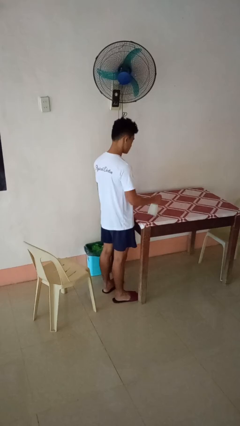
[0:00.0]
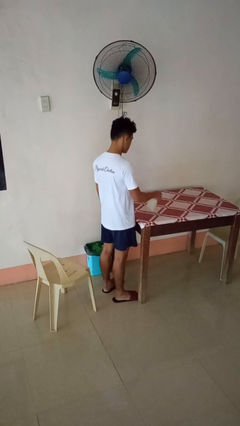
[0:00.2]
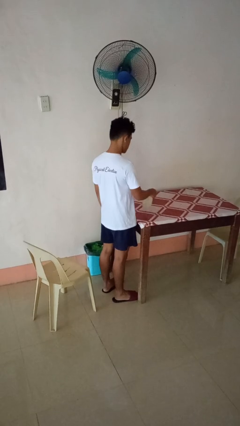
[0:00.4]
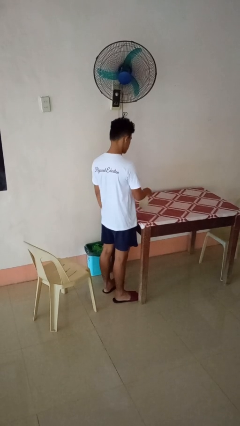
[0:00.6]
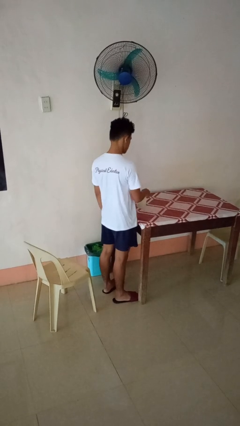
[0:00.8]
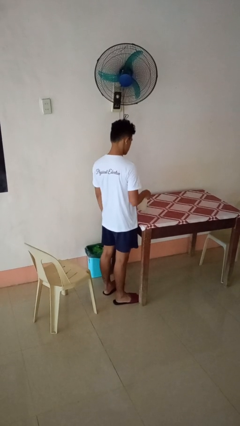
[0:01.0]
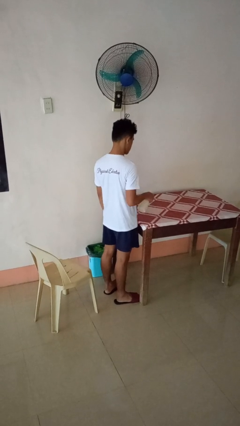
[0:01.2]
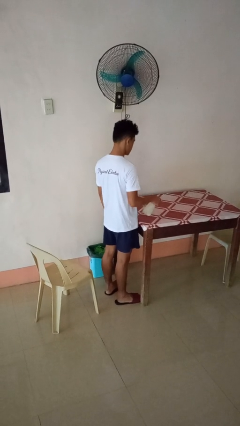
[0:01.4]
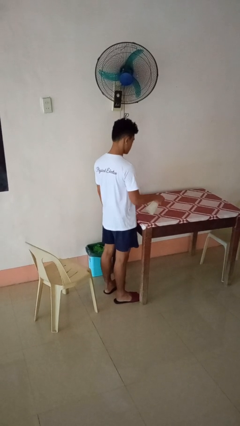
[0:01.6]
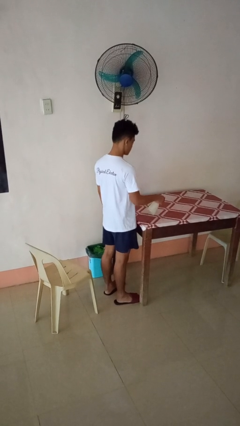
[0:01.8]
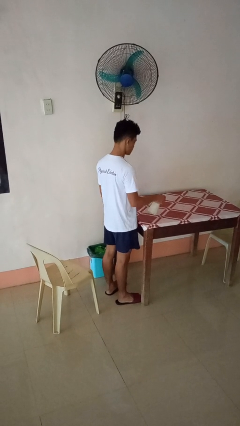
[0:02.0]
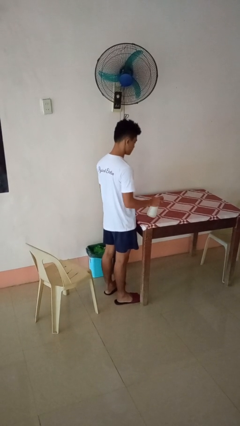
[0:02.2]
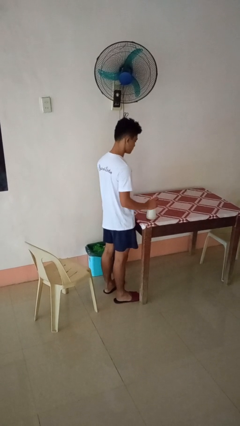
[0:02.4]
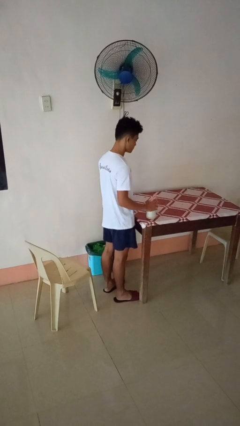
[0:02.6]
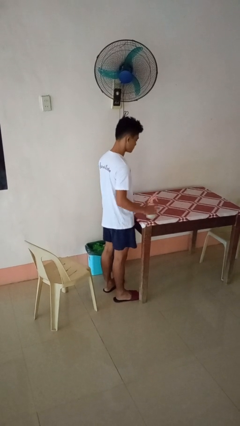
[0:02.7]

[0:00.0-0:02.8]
person sprays from bottle

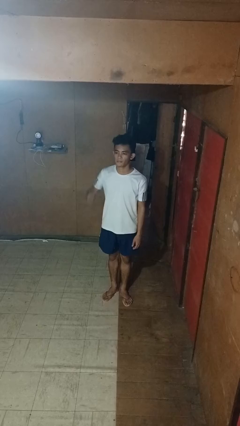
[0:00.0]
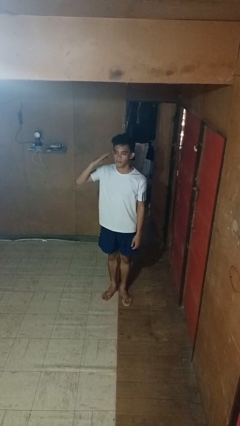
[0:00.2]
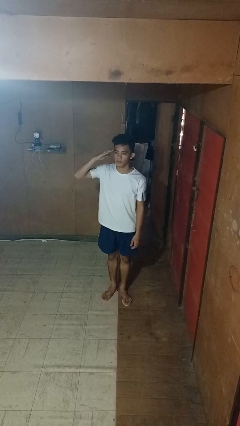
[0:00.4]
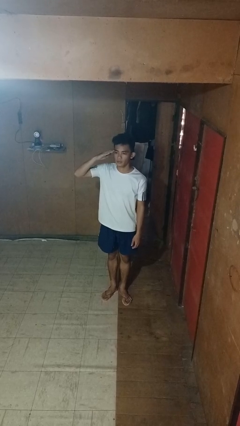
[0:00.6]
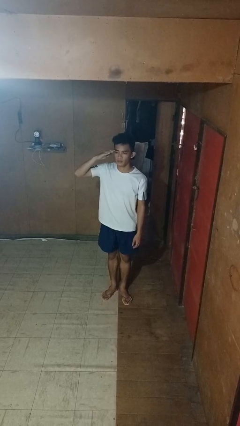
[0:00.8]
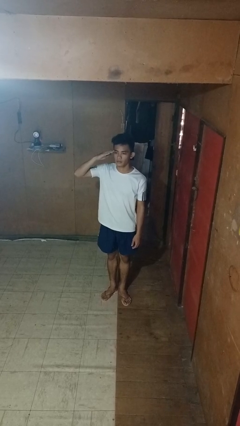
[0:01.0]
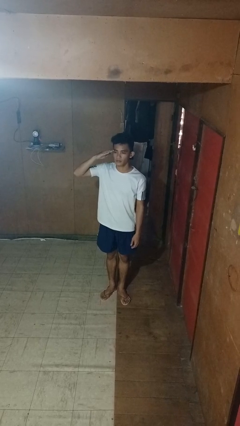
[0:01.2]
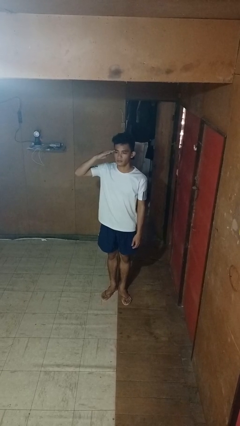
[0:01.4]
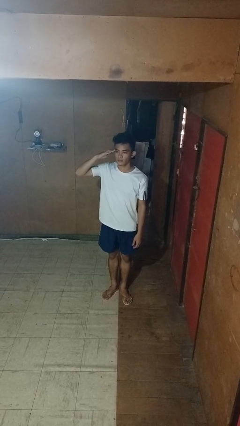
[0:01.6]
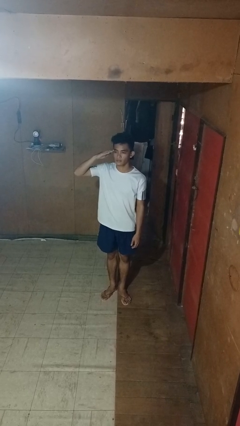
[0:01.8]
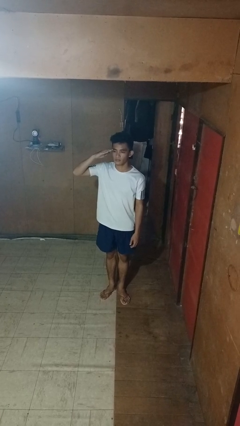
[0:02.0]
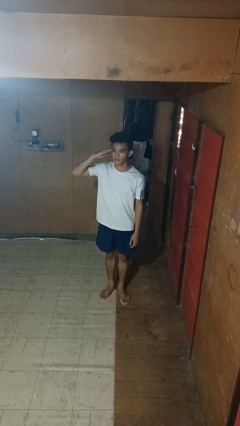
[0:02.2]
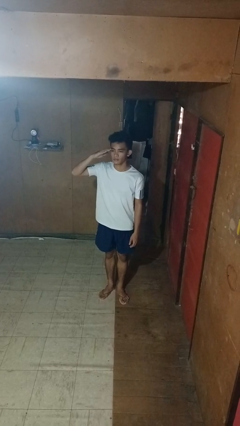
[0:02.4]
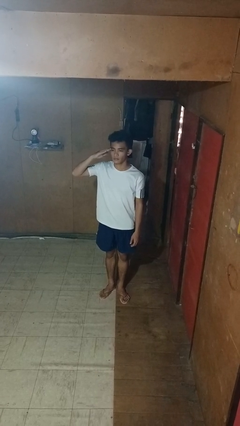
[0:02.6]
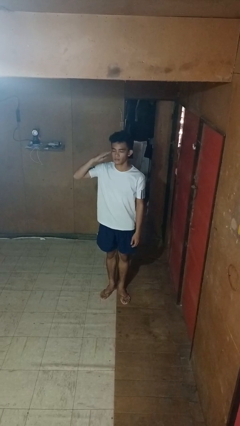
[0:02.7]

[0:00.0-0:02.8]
person salutes

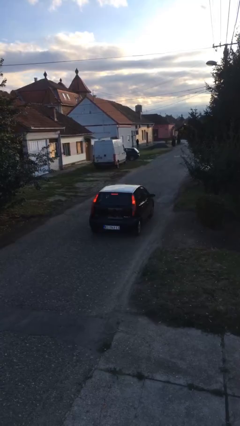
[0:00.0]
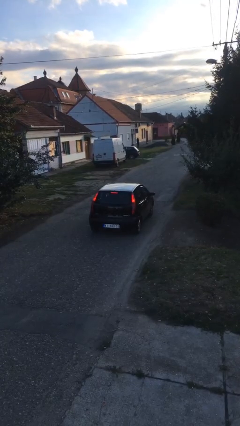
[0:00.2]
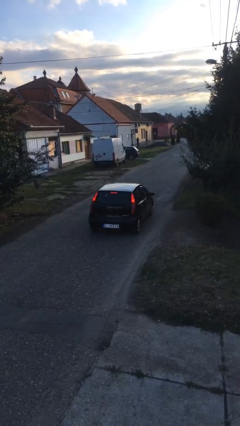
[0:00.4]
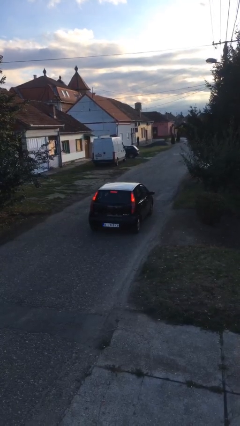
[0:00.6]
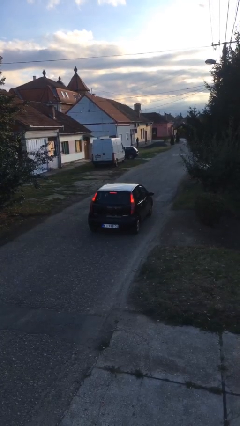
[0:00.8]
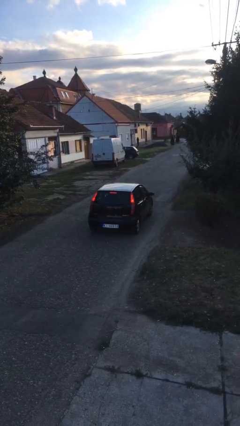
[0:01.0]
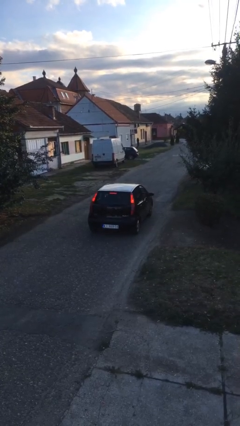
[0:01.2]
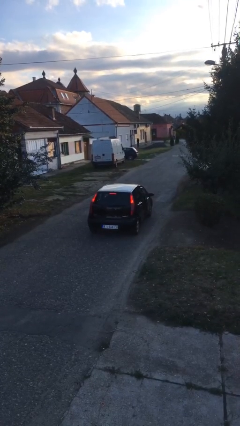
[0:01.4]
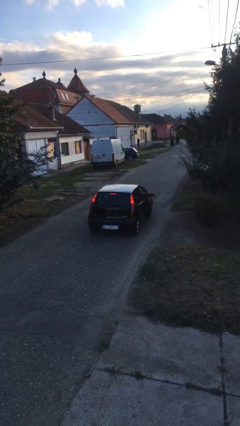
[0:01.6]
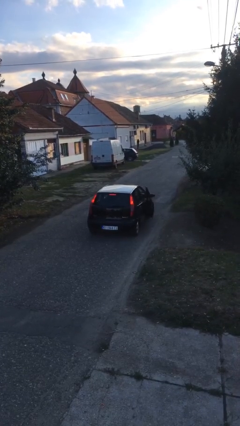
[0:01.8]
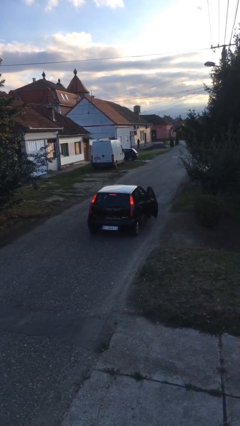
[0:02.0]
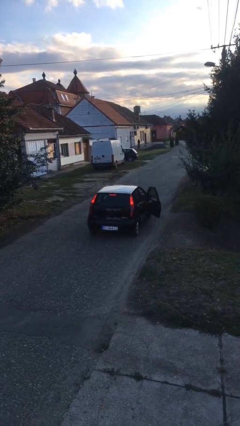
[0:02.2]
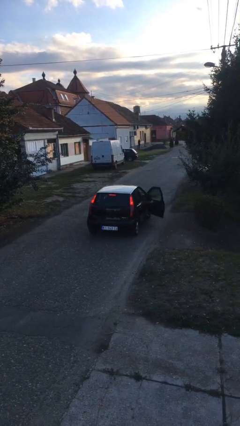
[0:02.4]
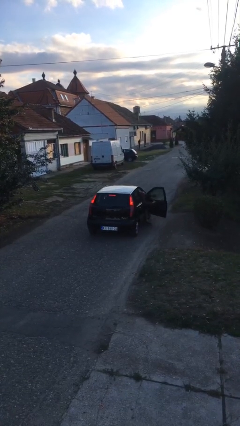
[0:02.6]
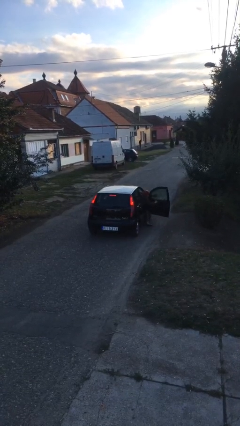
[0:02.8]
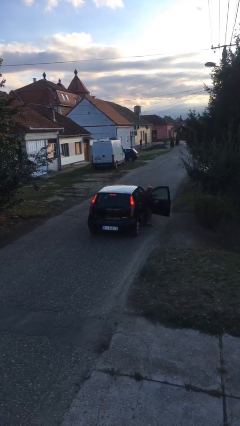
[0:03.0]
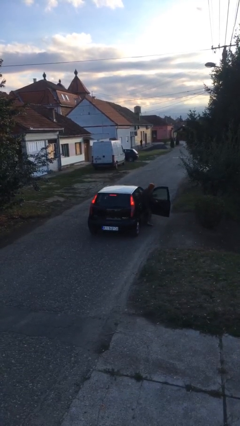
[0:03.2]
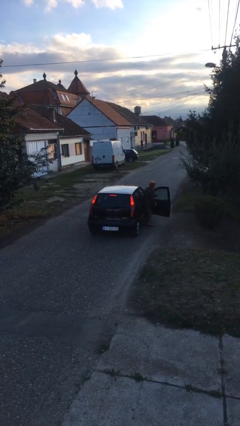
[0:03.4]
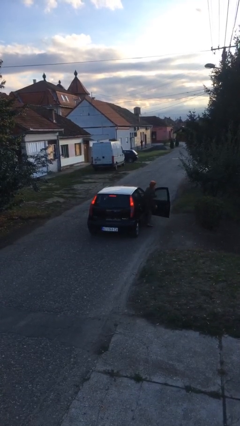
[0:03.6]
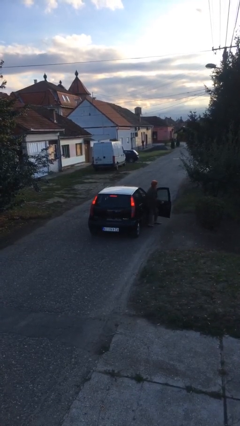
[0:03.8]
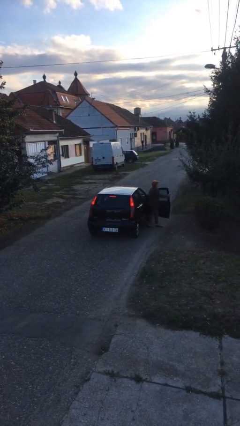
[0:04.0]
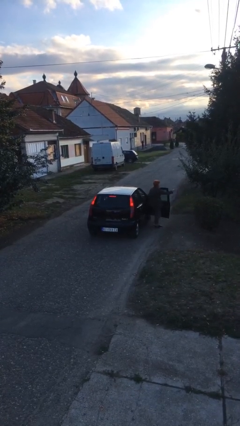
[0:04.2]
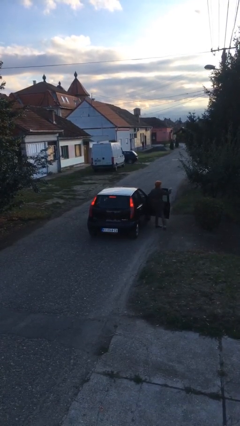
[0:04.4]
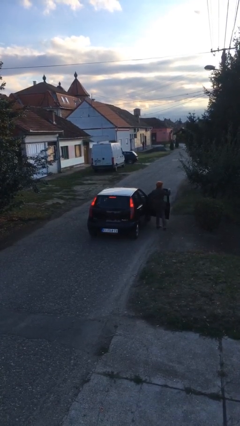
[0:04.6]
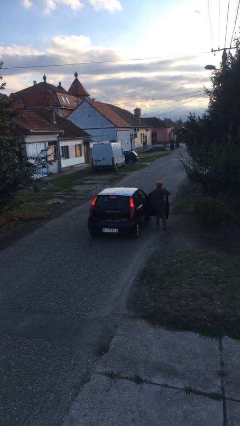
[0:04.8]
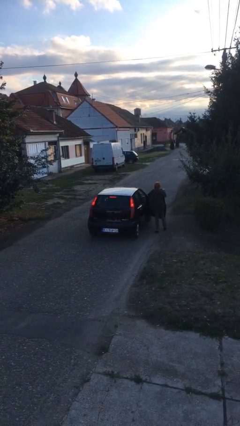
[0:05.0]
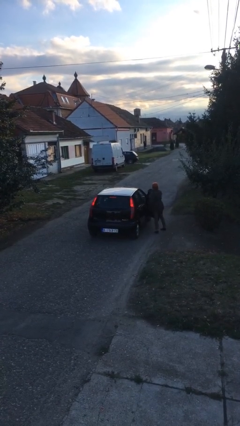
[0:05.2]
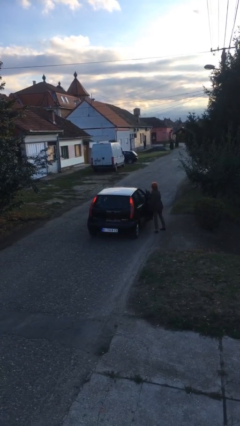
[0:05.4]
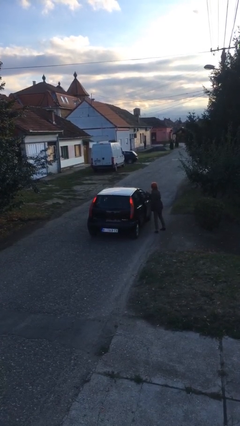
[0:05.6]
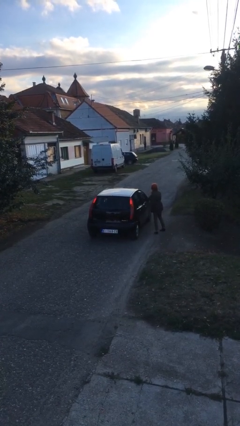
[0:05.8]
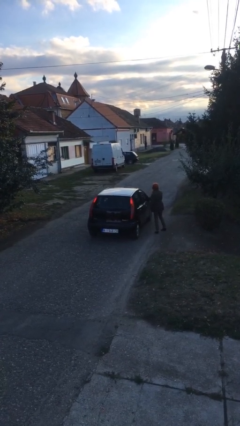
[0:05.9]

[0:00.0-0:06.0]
car drops off person

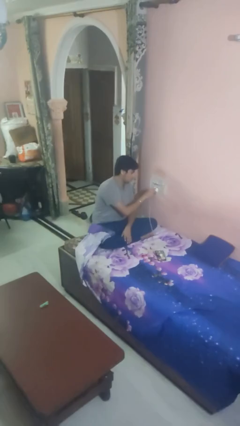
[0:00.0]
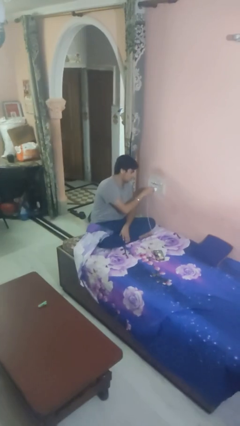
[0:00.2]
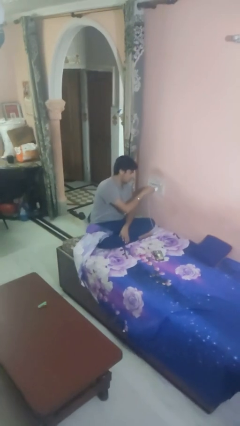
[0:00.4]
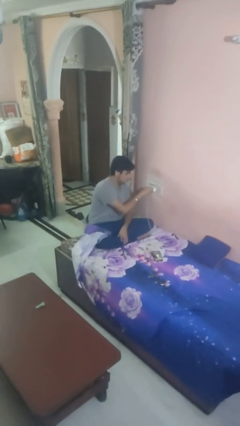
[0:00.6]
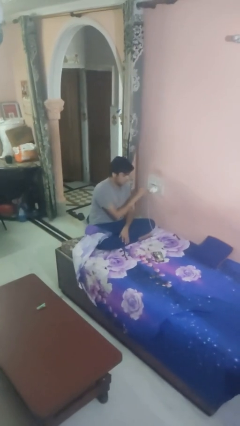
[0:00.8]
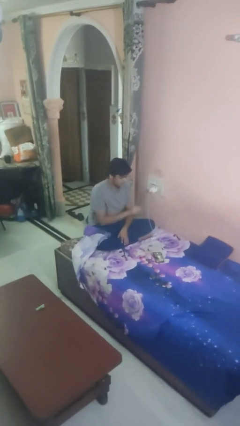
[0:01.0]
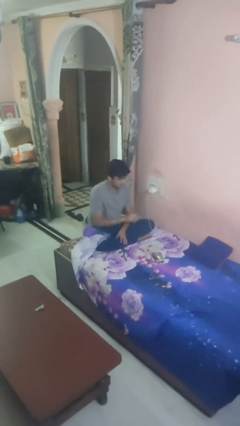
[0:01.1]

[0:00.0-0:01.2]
person plugs into electrical socket

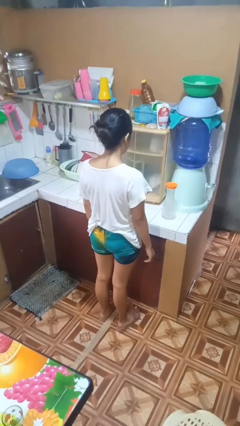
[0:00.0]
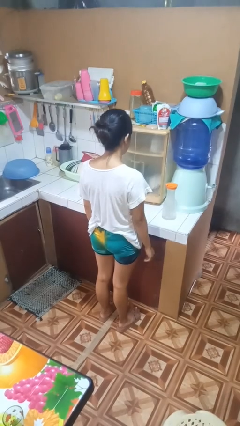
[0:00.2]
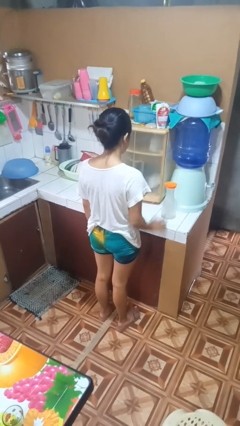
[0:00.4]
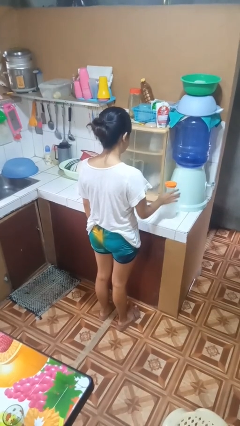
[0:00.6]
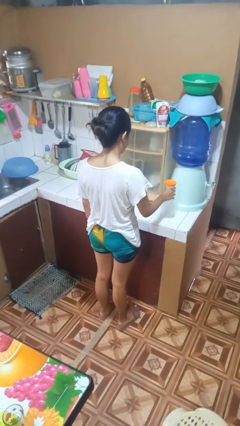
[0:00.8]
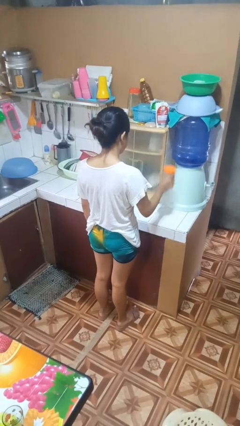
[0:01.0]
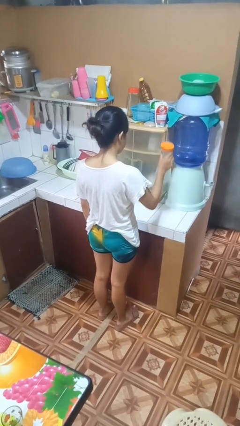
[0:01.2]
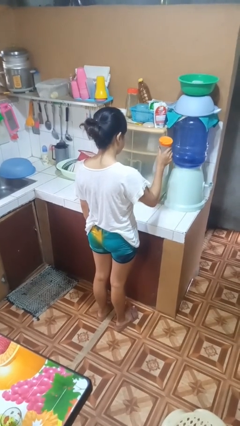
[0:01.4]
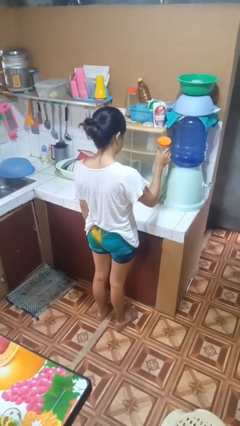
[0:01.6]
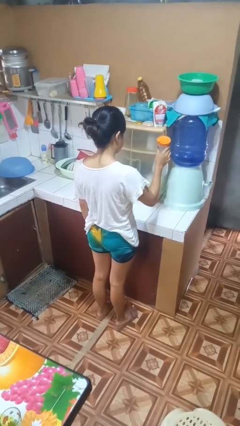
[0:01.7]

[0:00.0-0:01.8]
person picks up object from countertop

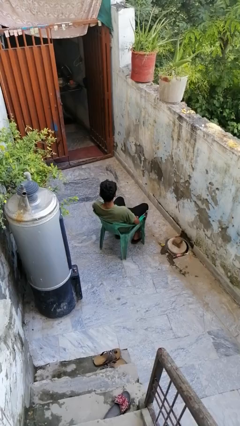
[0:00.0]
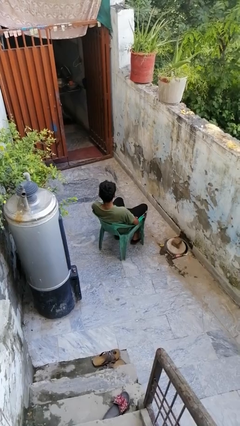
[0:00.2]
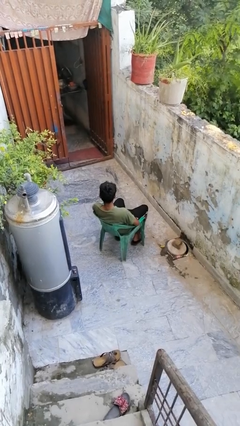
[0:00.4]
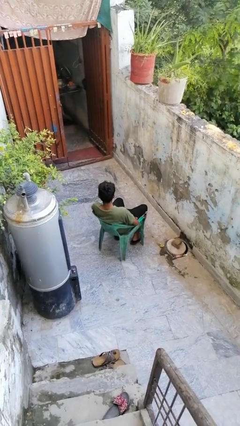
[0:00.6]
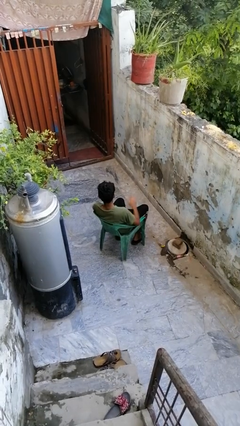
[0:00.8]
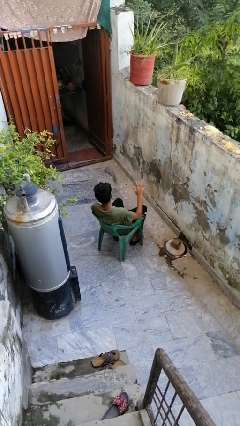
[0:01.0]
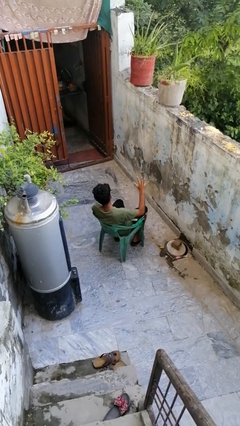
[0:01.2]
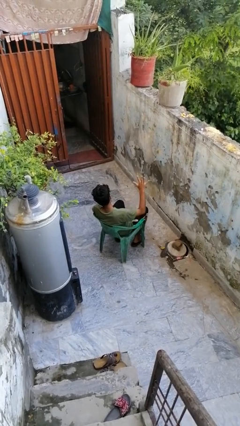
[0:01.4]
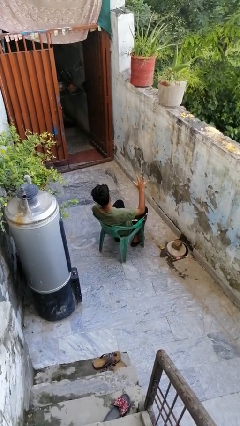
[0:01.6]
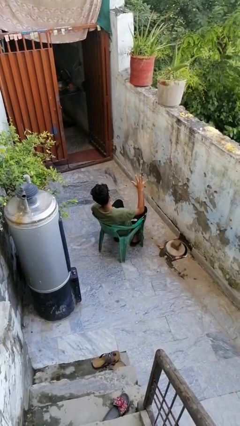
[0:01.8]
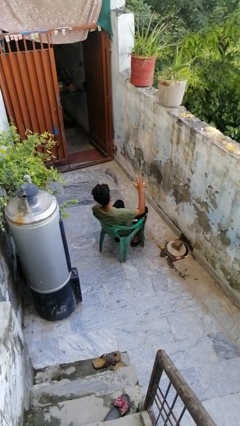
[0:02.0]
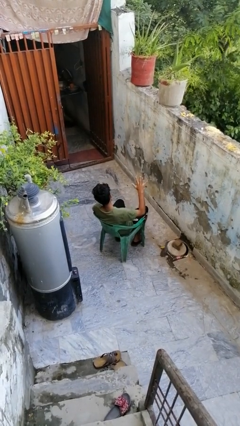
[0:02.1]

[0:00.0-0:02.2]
person gestures number five

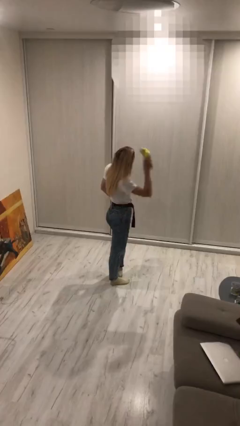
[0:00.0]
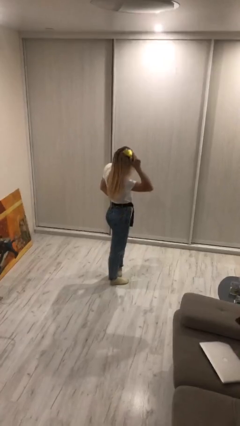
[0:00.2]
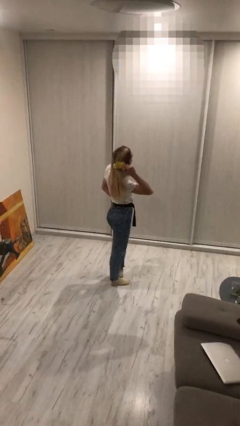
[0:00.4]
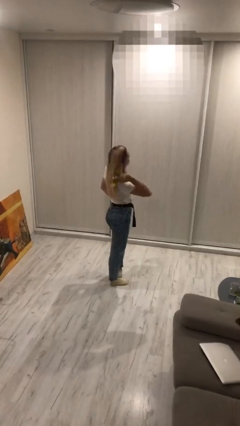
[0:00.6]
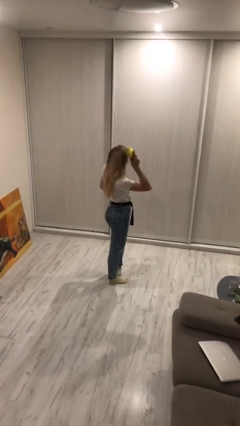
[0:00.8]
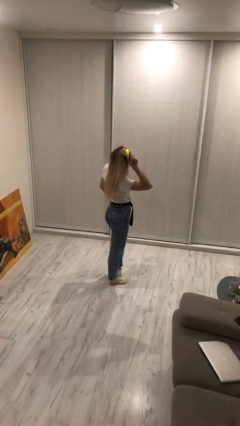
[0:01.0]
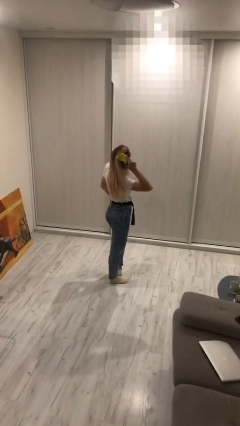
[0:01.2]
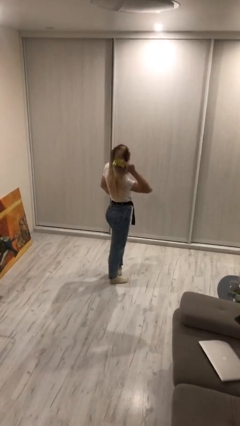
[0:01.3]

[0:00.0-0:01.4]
person brushes hair
